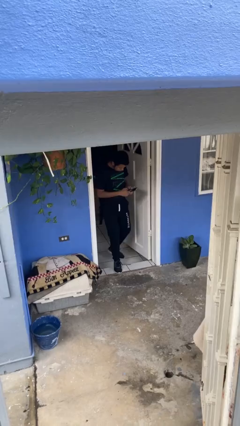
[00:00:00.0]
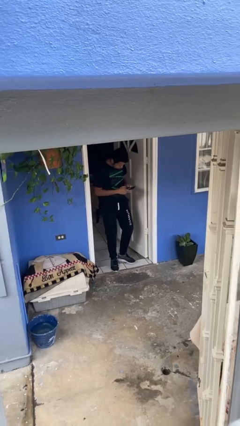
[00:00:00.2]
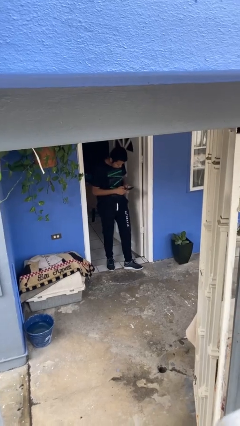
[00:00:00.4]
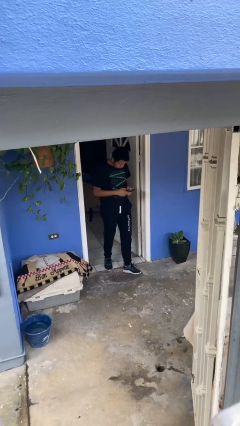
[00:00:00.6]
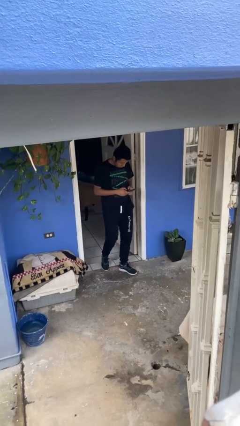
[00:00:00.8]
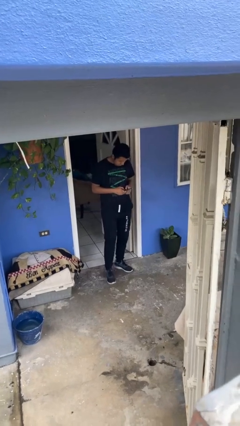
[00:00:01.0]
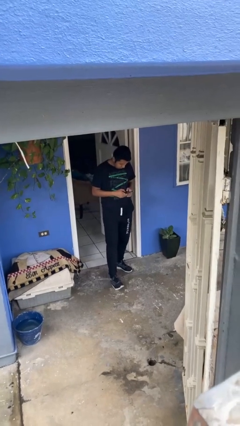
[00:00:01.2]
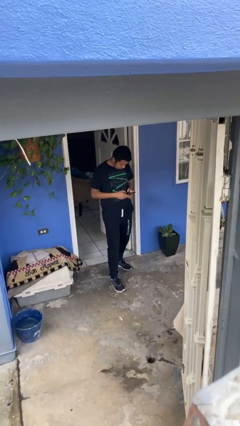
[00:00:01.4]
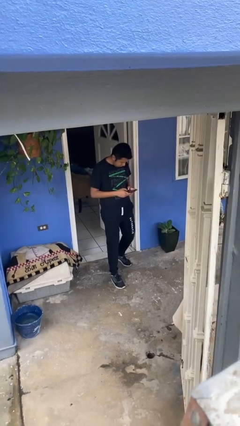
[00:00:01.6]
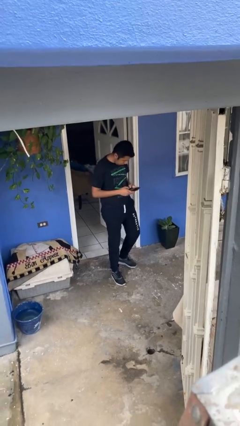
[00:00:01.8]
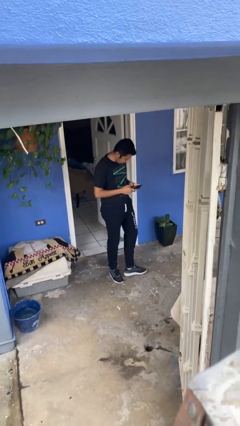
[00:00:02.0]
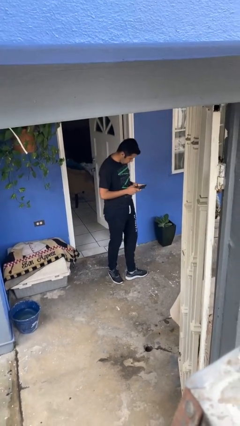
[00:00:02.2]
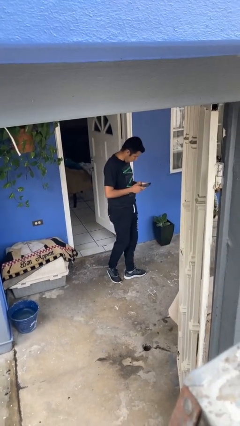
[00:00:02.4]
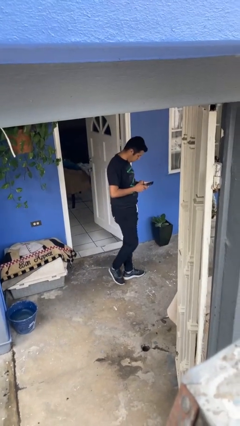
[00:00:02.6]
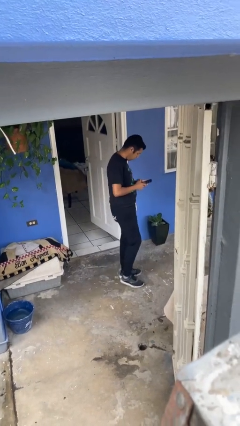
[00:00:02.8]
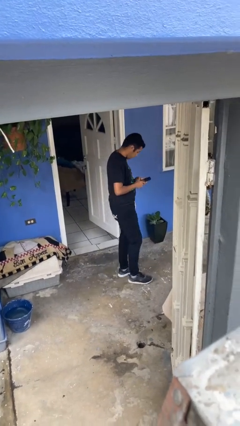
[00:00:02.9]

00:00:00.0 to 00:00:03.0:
person enters scene through structure

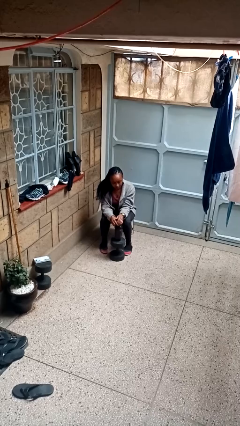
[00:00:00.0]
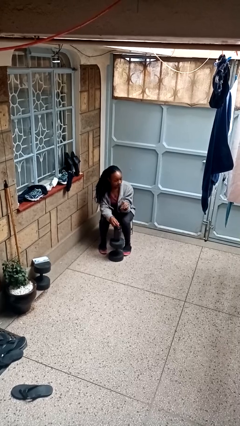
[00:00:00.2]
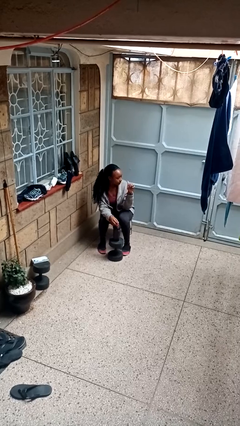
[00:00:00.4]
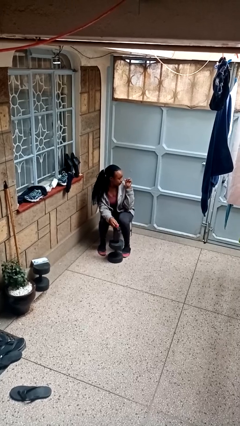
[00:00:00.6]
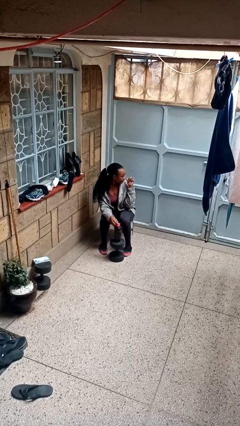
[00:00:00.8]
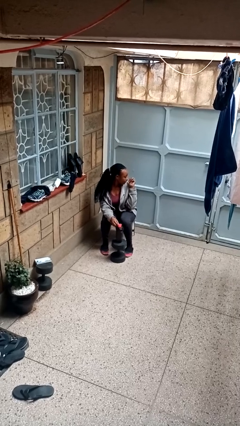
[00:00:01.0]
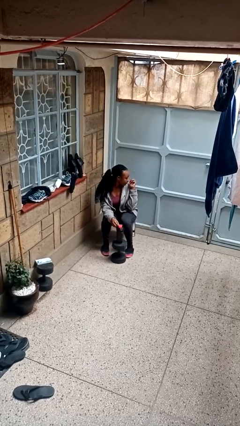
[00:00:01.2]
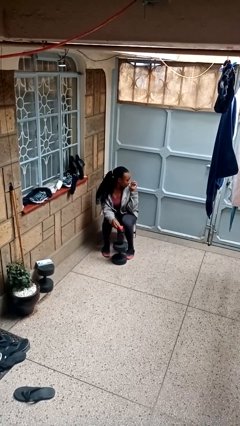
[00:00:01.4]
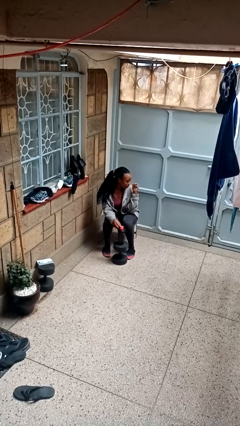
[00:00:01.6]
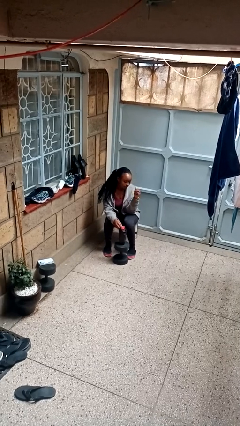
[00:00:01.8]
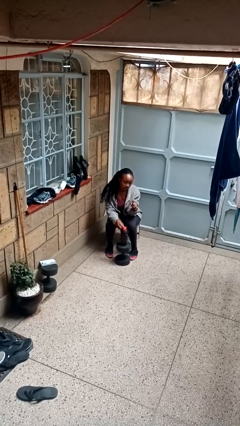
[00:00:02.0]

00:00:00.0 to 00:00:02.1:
person gestures behind me

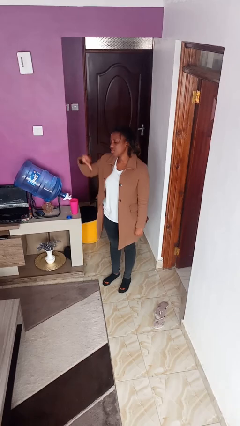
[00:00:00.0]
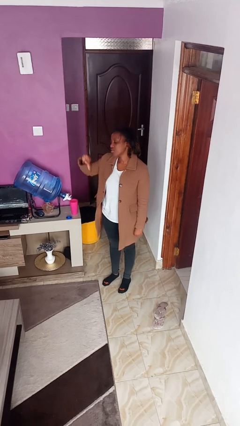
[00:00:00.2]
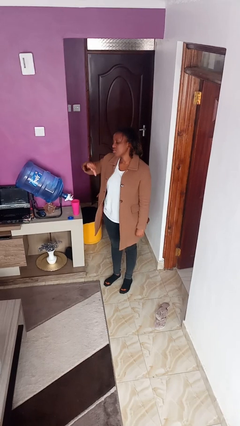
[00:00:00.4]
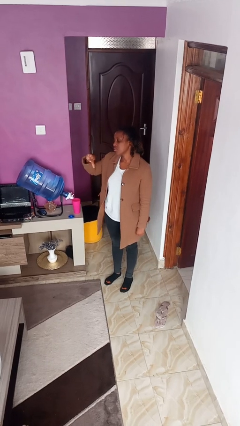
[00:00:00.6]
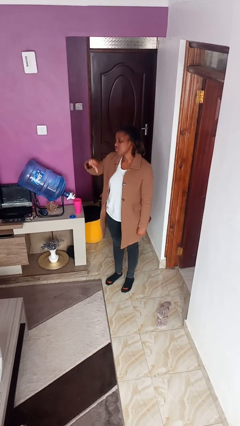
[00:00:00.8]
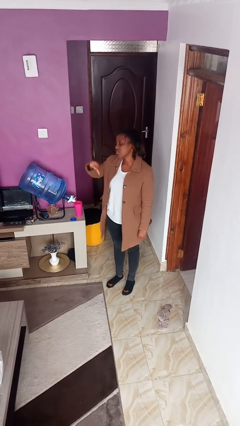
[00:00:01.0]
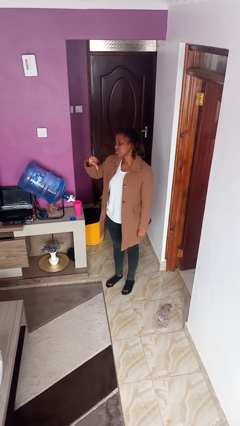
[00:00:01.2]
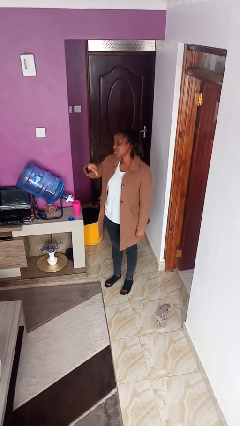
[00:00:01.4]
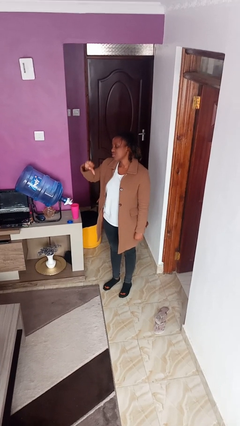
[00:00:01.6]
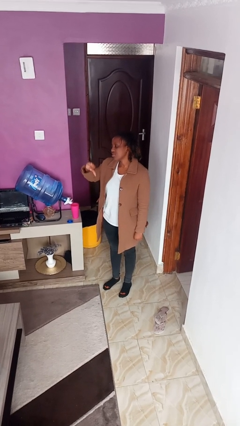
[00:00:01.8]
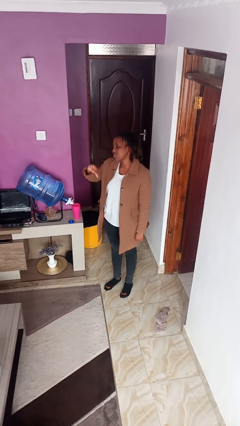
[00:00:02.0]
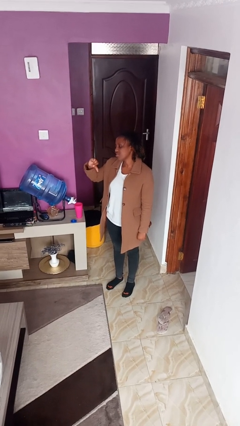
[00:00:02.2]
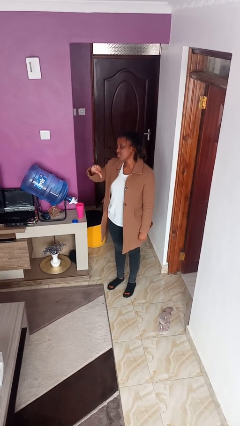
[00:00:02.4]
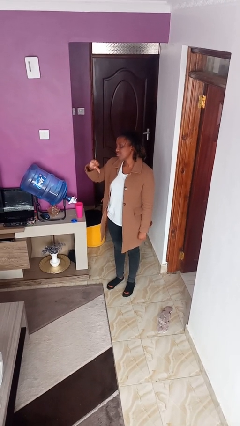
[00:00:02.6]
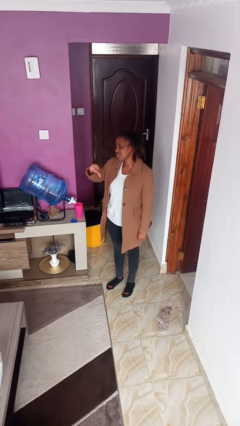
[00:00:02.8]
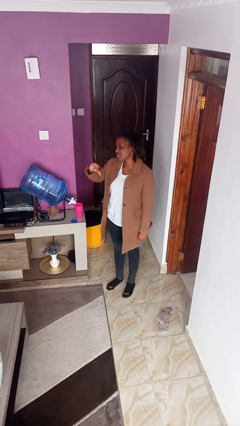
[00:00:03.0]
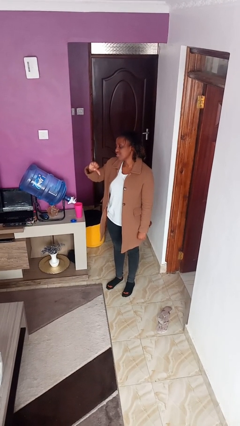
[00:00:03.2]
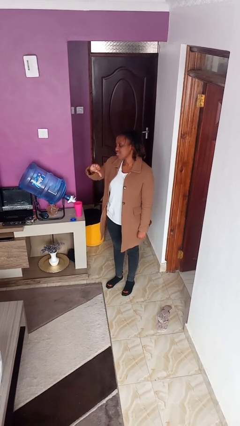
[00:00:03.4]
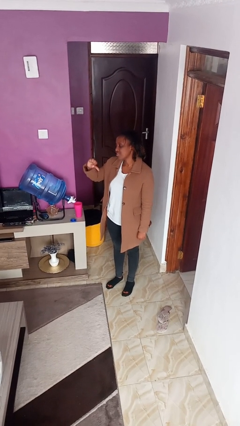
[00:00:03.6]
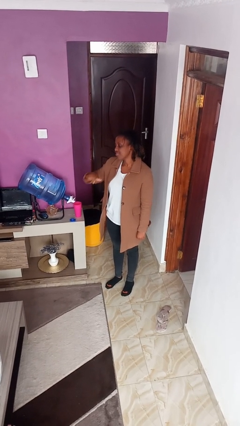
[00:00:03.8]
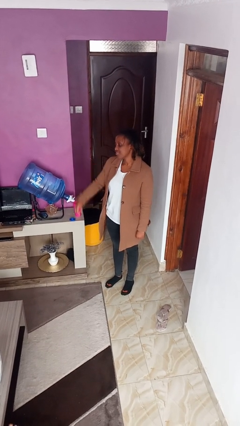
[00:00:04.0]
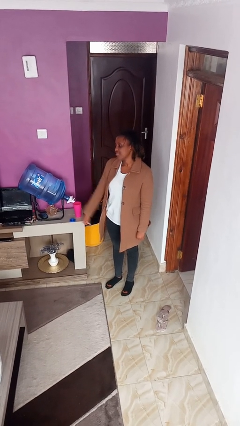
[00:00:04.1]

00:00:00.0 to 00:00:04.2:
person gestures thumbs down

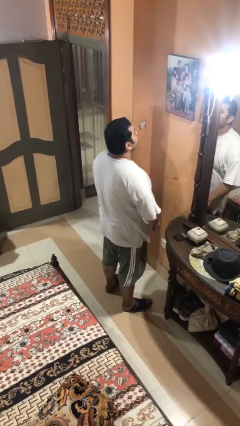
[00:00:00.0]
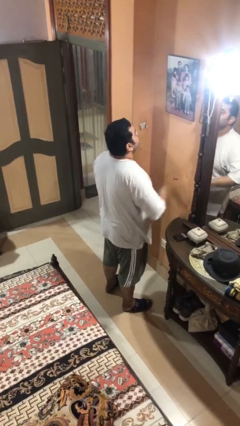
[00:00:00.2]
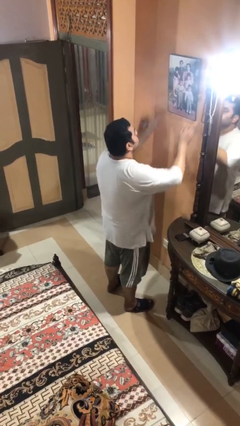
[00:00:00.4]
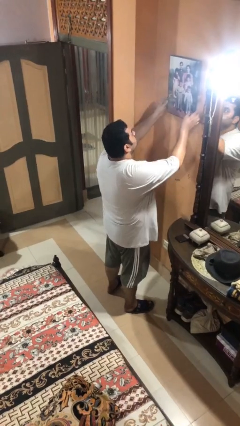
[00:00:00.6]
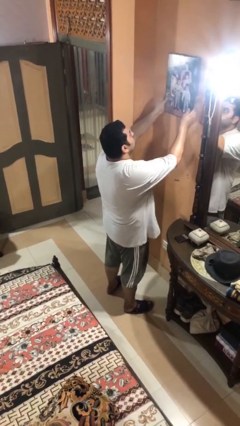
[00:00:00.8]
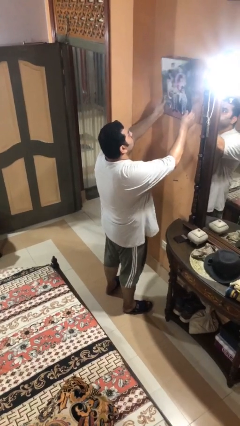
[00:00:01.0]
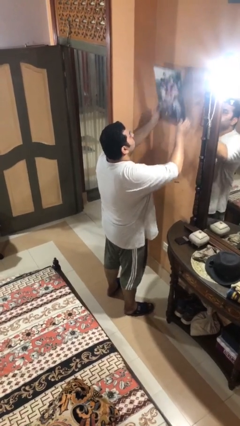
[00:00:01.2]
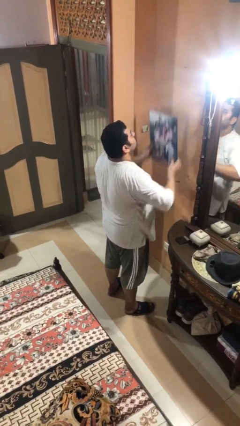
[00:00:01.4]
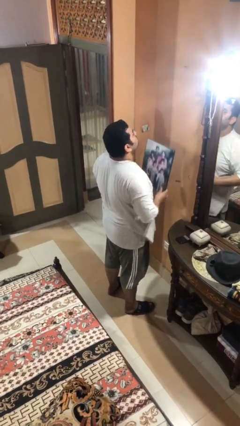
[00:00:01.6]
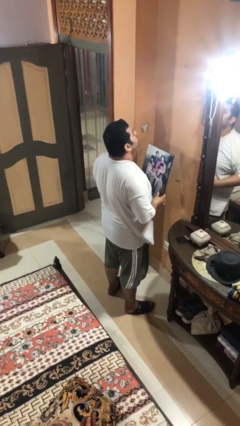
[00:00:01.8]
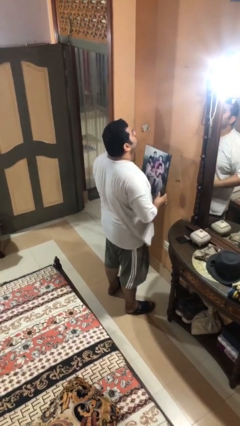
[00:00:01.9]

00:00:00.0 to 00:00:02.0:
person takes down picture frame

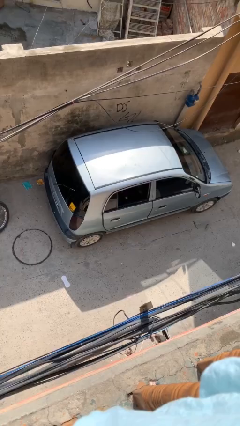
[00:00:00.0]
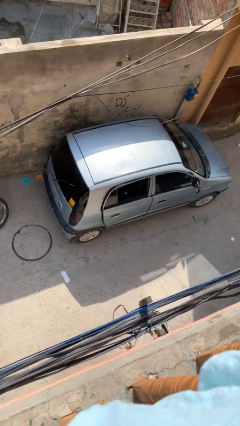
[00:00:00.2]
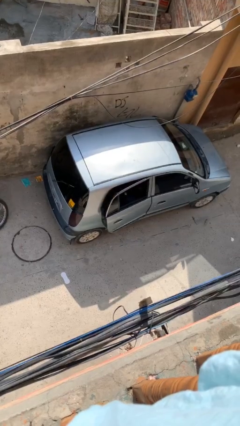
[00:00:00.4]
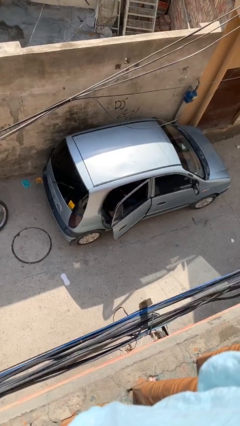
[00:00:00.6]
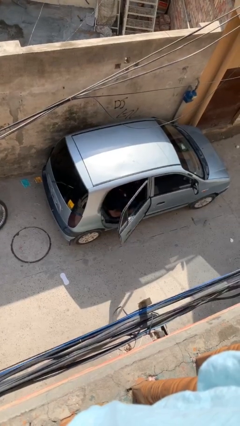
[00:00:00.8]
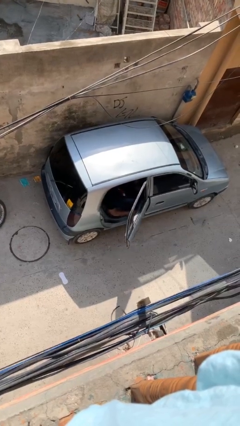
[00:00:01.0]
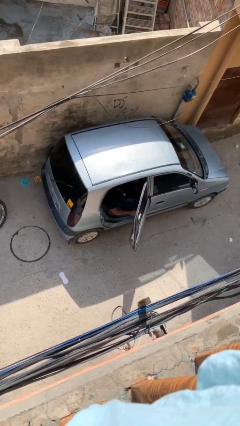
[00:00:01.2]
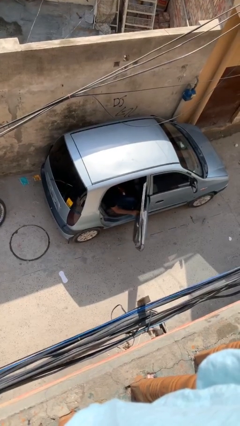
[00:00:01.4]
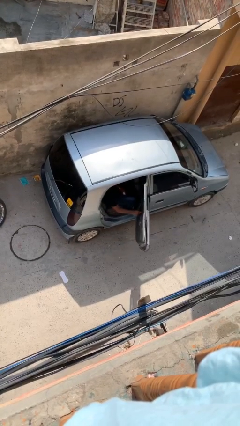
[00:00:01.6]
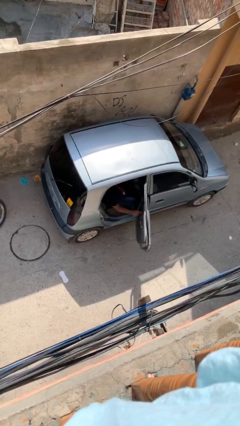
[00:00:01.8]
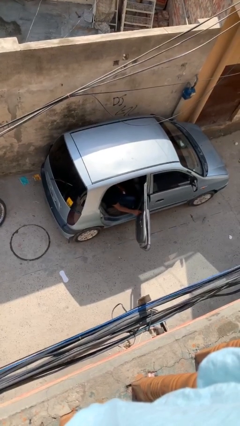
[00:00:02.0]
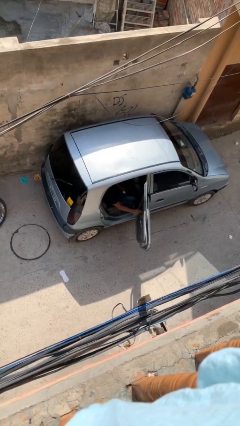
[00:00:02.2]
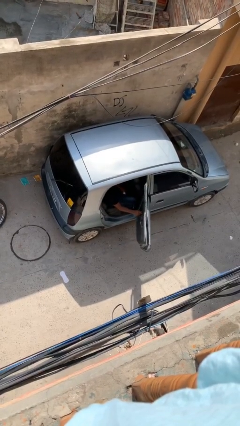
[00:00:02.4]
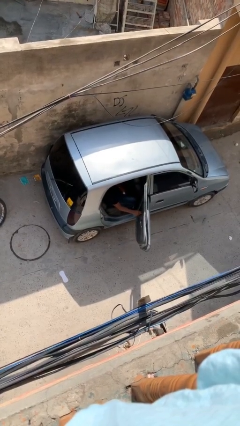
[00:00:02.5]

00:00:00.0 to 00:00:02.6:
person opens car door

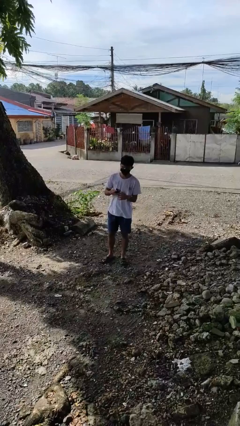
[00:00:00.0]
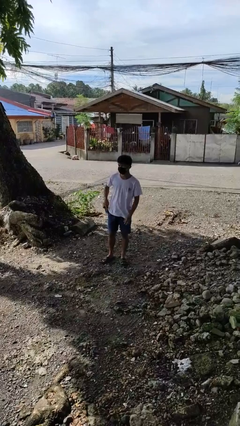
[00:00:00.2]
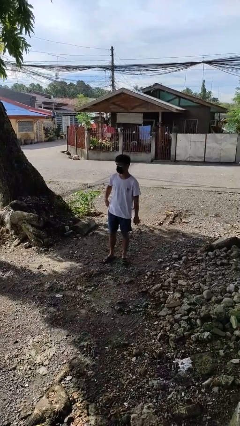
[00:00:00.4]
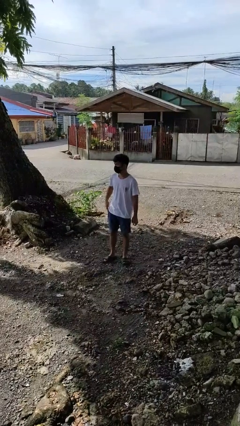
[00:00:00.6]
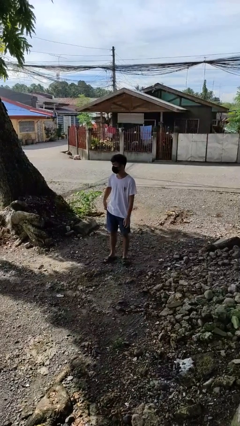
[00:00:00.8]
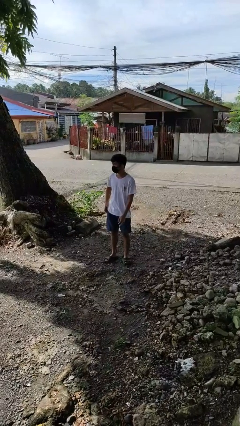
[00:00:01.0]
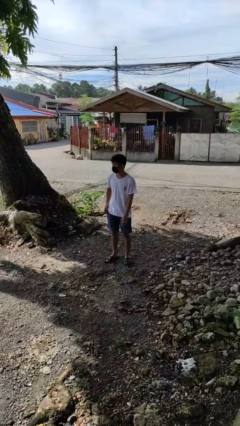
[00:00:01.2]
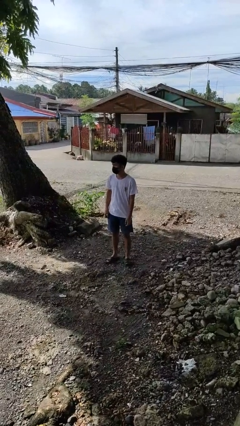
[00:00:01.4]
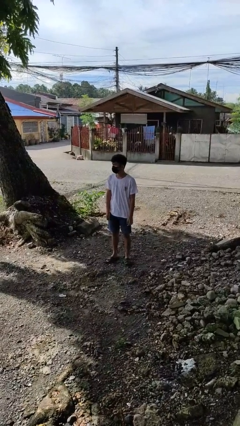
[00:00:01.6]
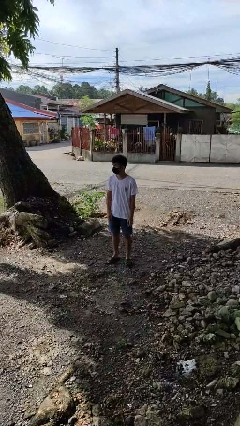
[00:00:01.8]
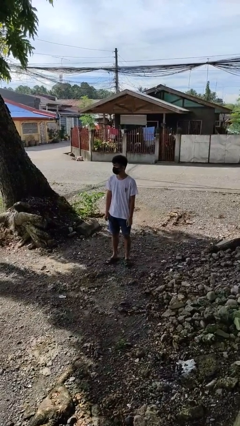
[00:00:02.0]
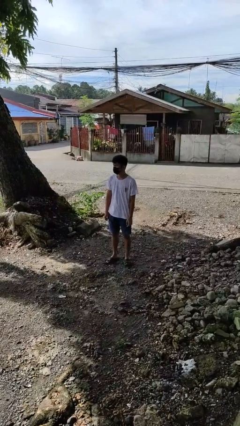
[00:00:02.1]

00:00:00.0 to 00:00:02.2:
person puts phone into pocket

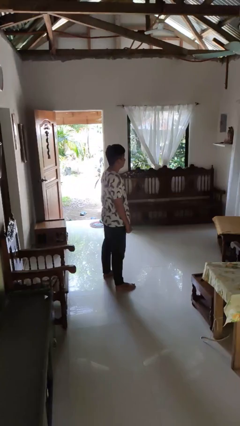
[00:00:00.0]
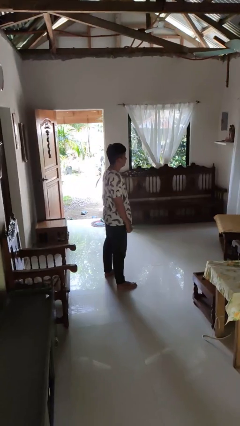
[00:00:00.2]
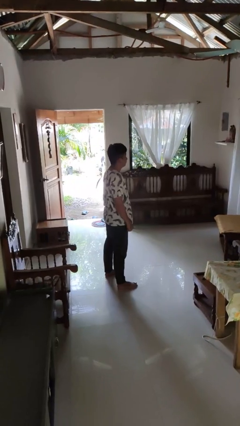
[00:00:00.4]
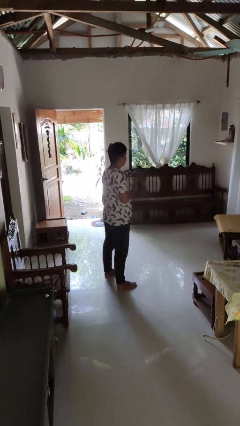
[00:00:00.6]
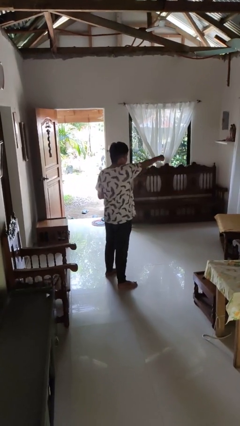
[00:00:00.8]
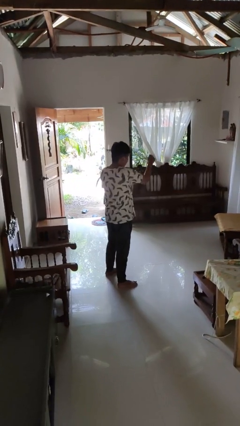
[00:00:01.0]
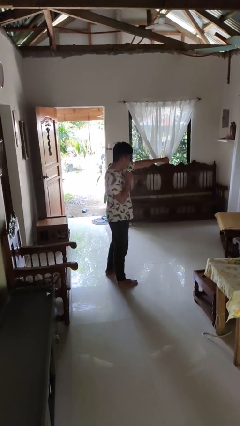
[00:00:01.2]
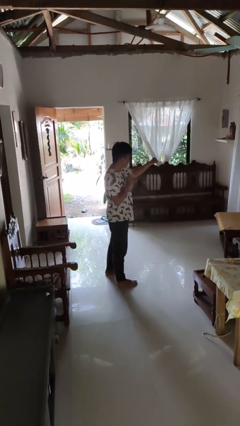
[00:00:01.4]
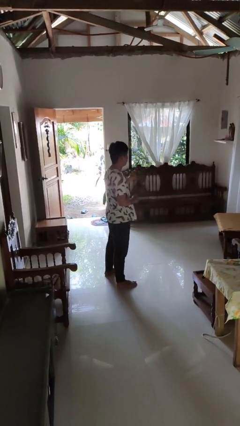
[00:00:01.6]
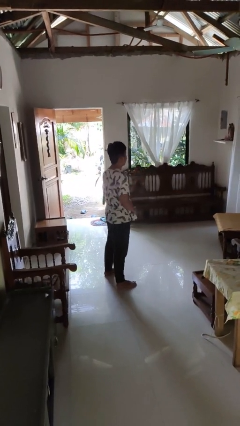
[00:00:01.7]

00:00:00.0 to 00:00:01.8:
person punches
